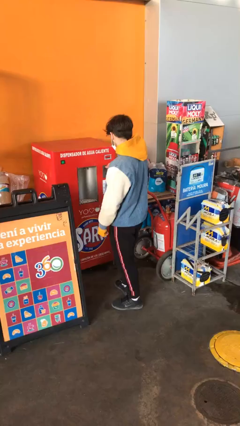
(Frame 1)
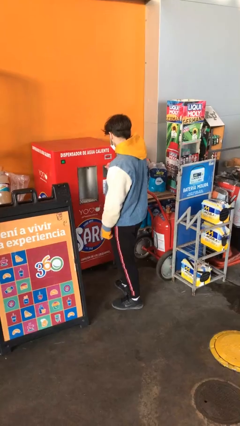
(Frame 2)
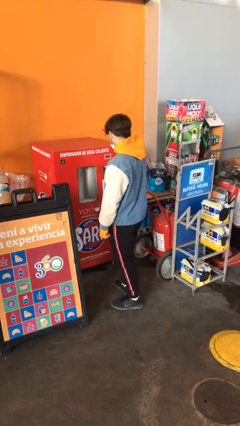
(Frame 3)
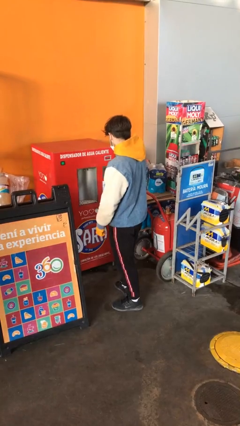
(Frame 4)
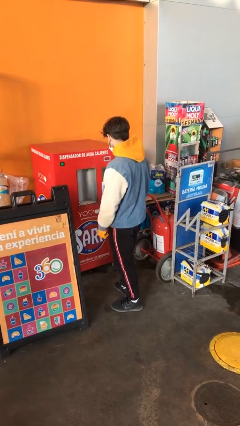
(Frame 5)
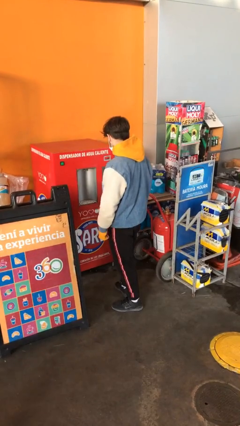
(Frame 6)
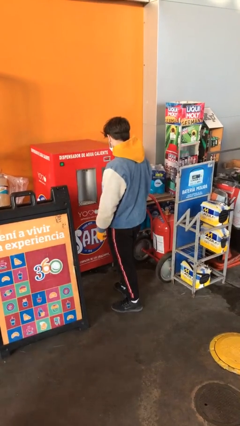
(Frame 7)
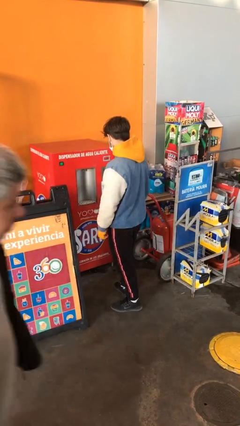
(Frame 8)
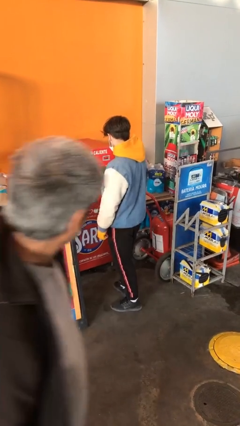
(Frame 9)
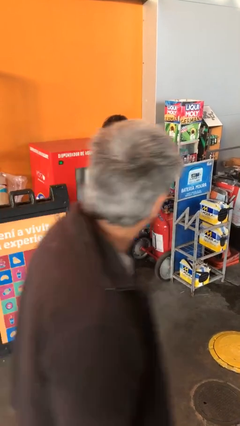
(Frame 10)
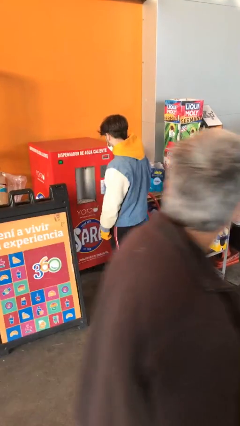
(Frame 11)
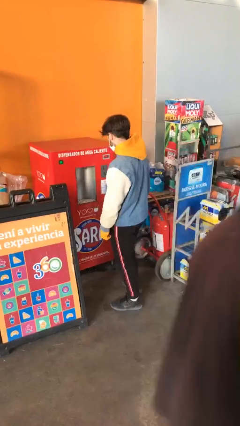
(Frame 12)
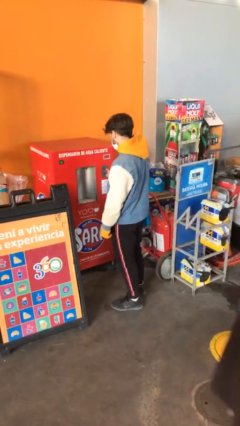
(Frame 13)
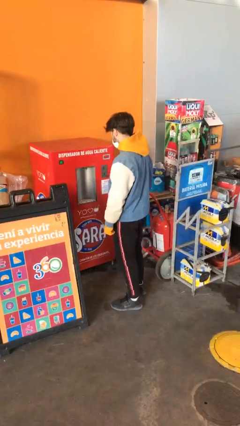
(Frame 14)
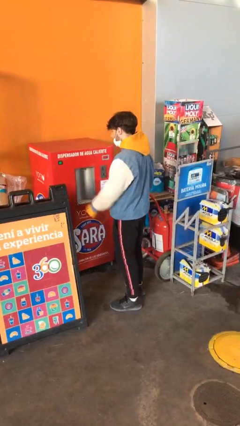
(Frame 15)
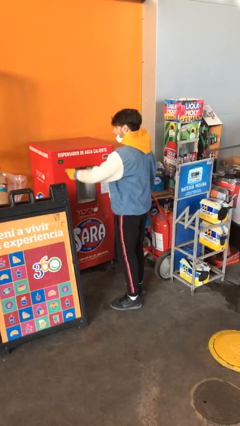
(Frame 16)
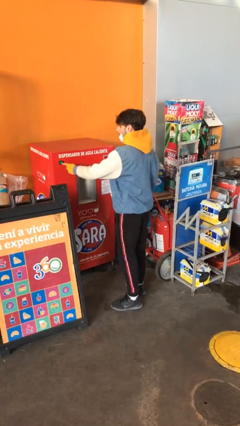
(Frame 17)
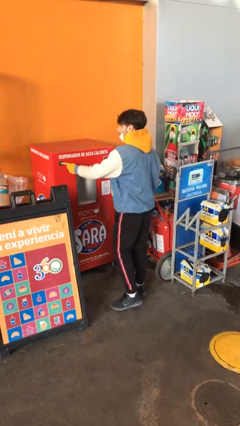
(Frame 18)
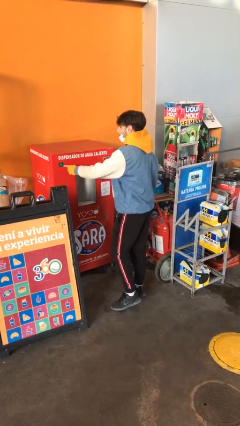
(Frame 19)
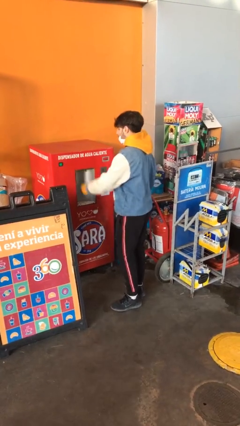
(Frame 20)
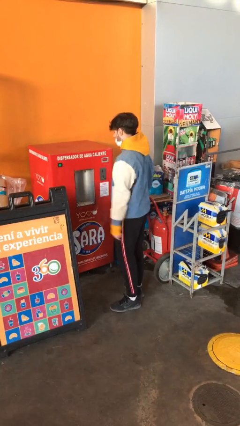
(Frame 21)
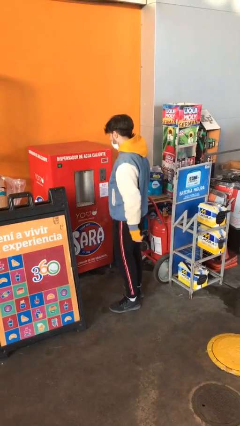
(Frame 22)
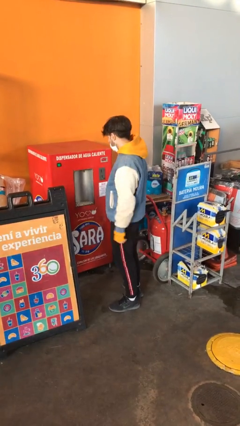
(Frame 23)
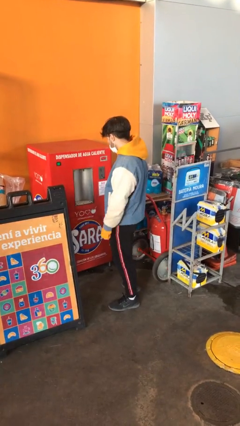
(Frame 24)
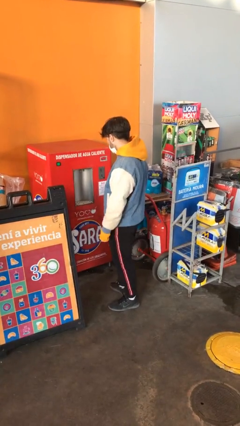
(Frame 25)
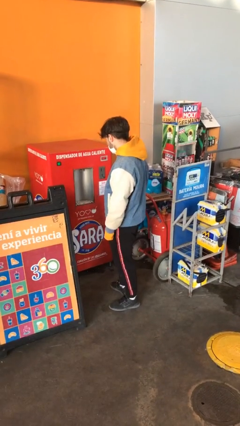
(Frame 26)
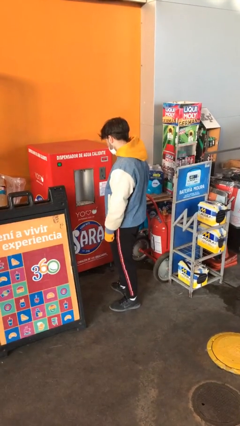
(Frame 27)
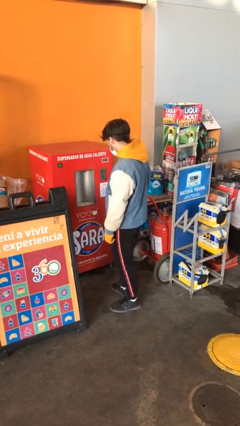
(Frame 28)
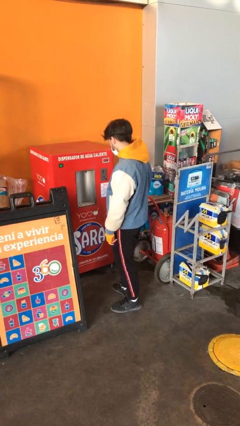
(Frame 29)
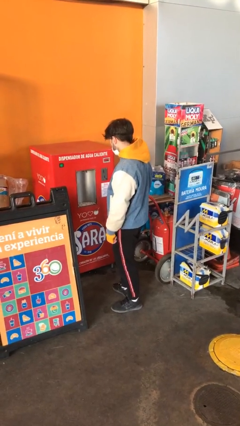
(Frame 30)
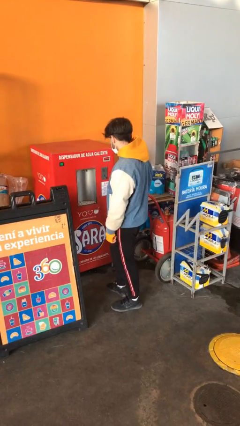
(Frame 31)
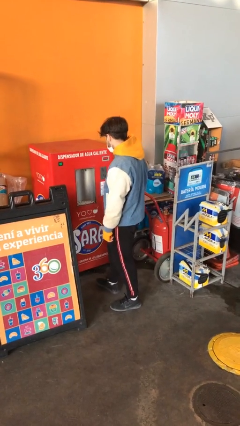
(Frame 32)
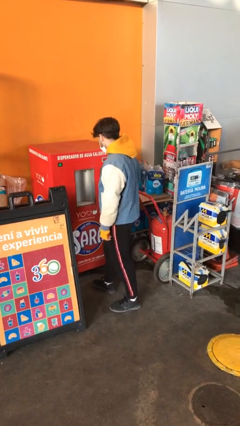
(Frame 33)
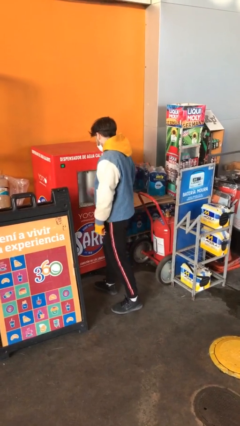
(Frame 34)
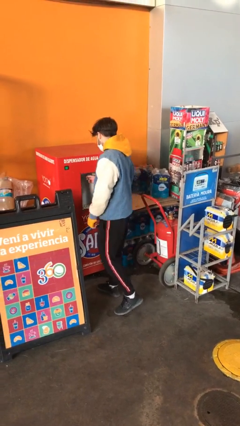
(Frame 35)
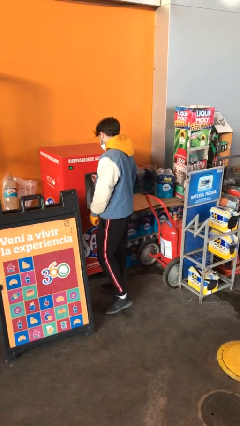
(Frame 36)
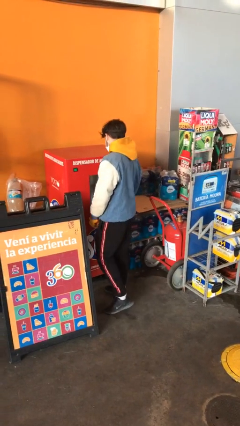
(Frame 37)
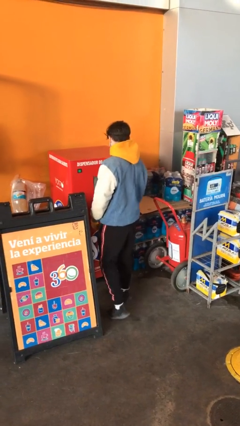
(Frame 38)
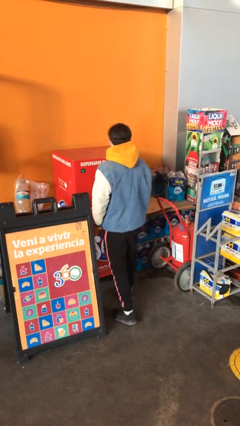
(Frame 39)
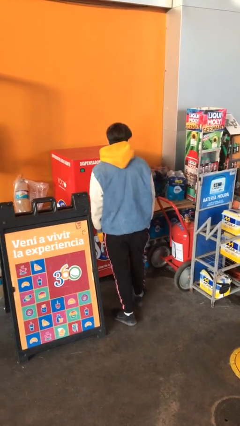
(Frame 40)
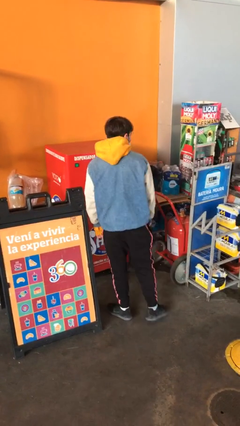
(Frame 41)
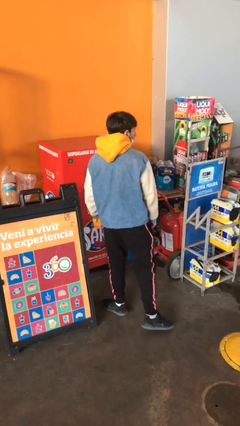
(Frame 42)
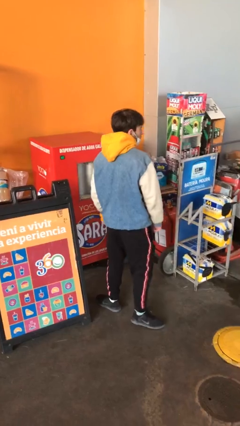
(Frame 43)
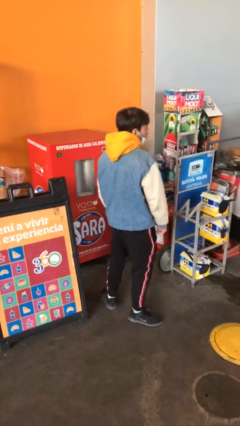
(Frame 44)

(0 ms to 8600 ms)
person purchases from machine

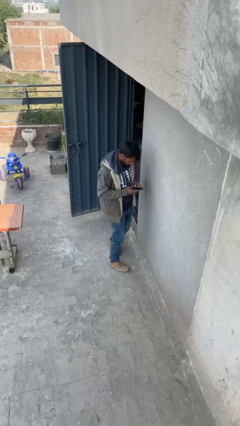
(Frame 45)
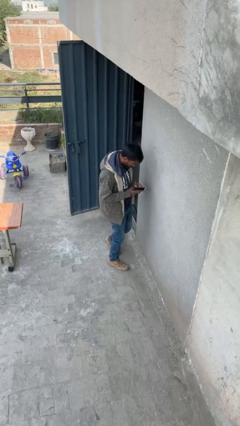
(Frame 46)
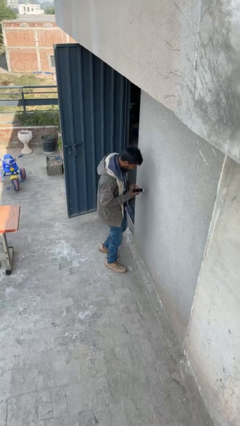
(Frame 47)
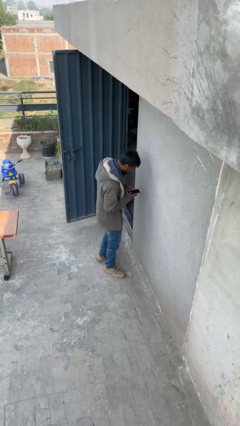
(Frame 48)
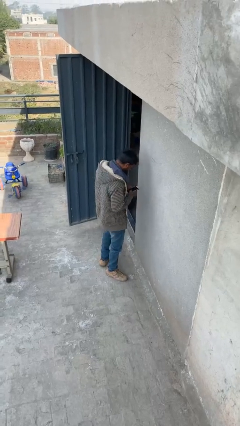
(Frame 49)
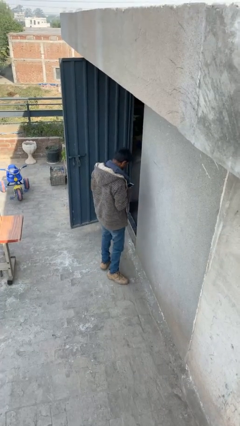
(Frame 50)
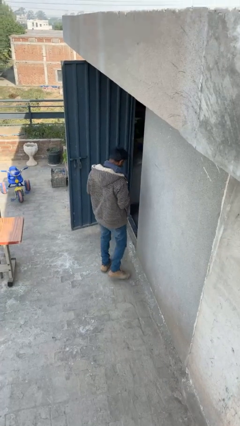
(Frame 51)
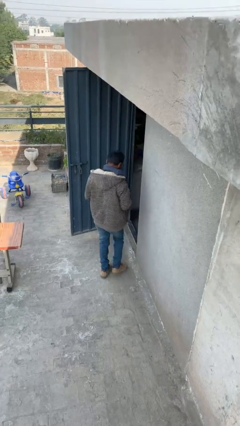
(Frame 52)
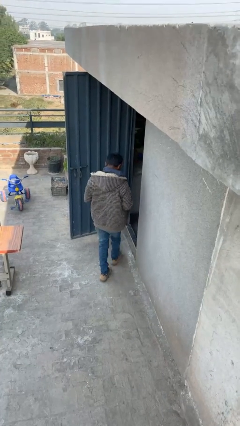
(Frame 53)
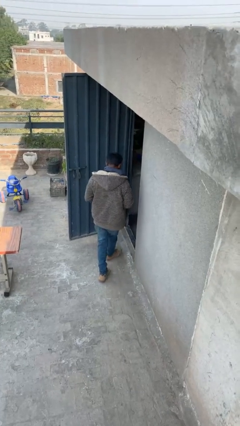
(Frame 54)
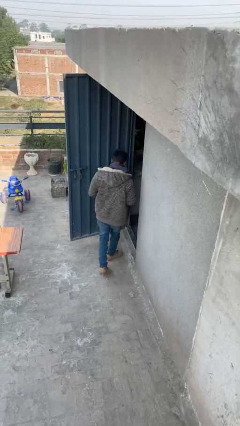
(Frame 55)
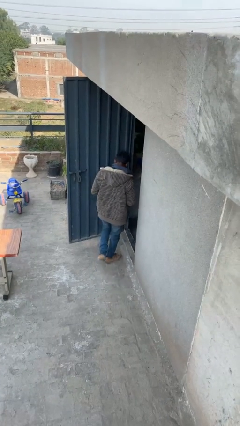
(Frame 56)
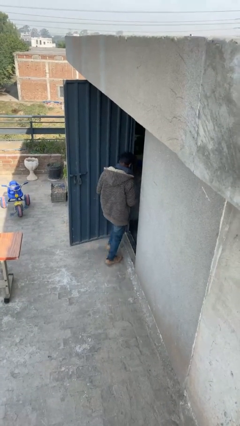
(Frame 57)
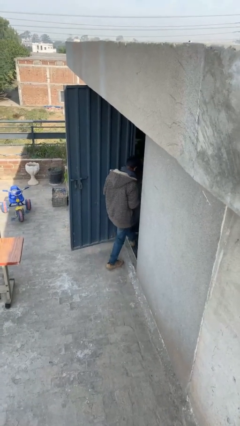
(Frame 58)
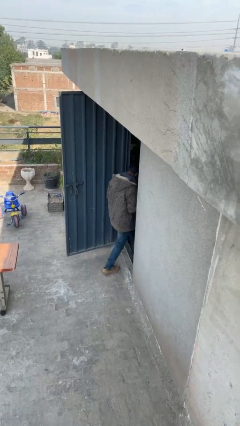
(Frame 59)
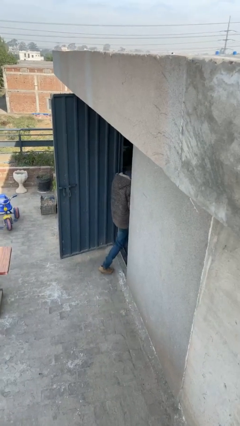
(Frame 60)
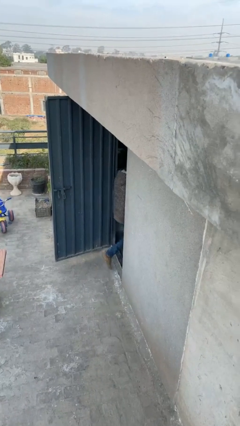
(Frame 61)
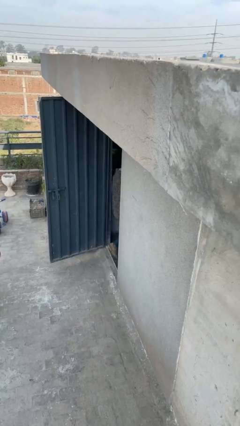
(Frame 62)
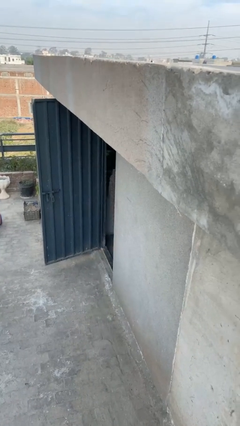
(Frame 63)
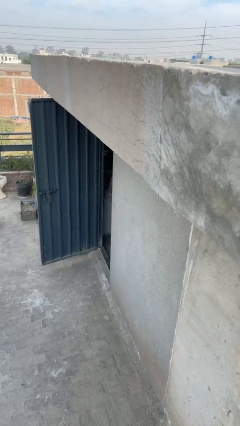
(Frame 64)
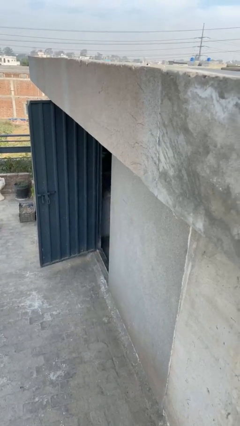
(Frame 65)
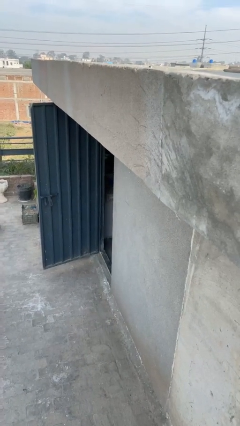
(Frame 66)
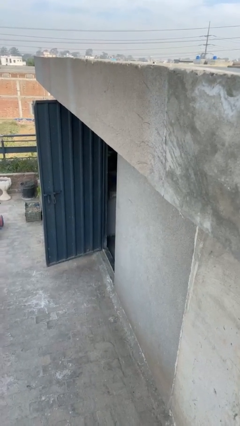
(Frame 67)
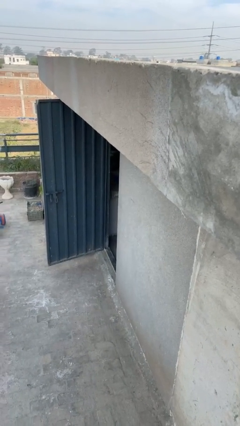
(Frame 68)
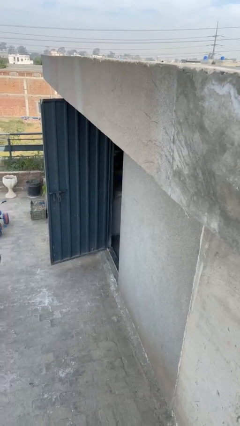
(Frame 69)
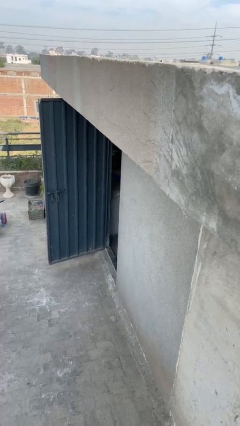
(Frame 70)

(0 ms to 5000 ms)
person exits scene through structure

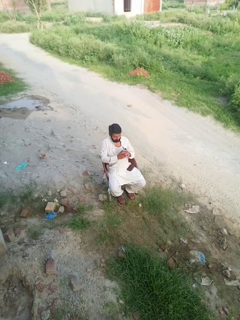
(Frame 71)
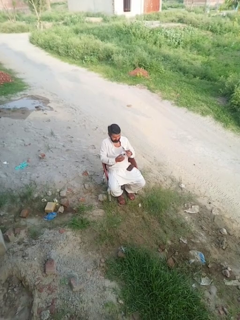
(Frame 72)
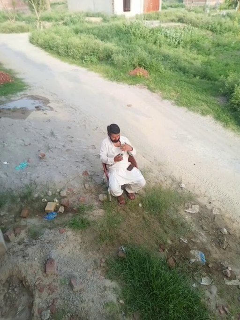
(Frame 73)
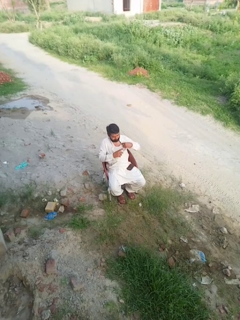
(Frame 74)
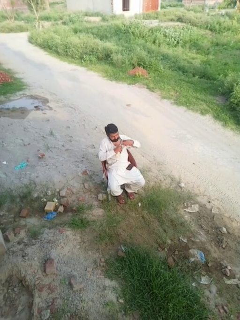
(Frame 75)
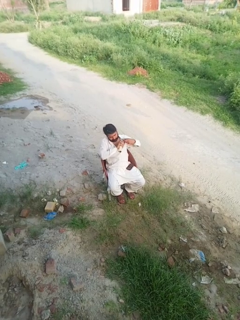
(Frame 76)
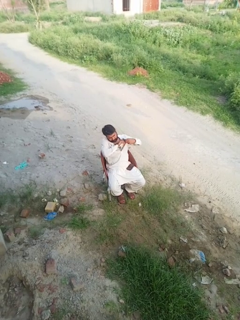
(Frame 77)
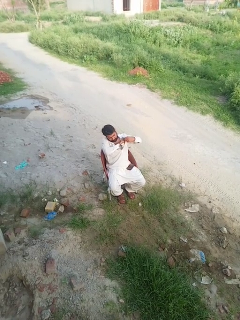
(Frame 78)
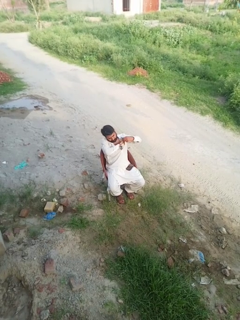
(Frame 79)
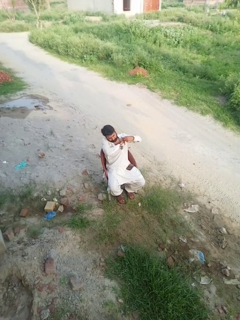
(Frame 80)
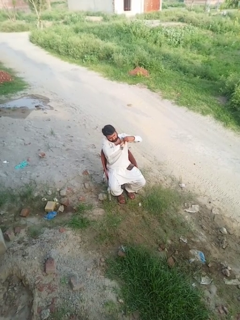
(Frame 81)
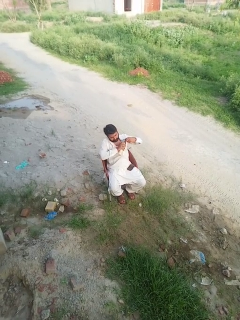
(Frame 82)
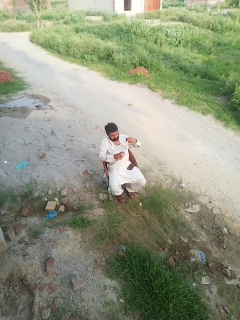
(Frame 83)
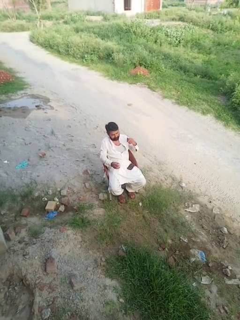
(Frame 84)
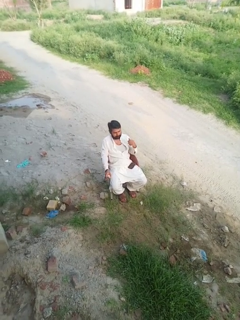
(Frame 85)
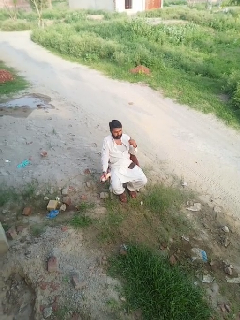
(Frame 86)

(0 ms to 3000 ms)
person applies deodorant

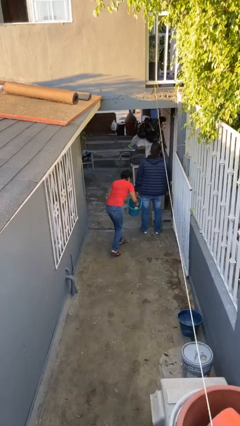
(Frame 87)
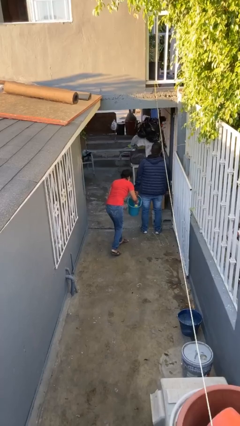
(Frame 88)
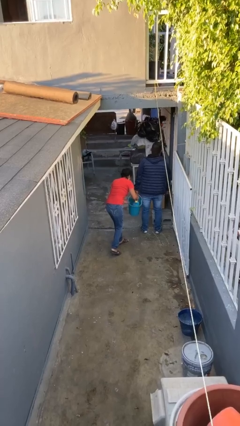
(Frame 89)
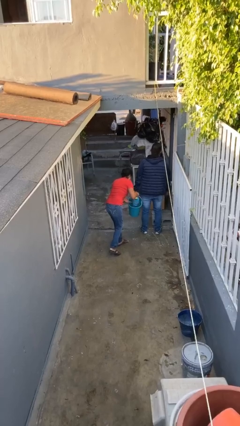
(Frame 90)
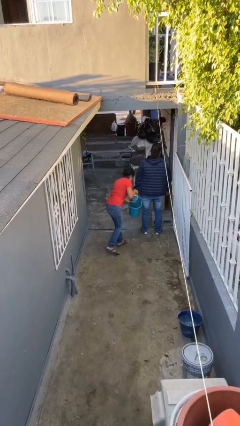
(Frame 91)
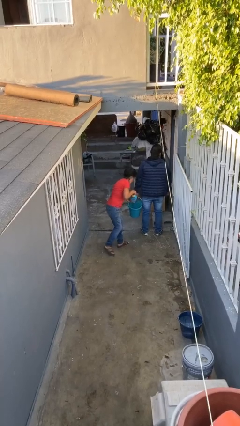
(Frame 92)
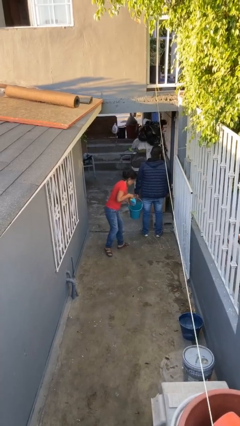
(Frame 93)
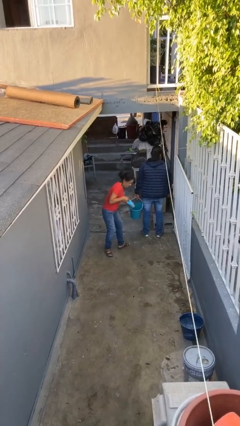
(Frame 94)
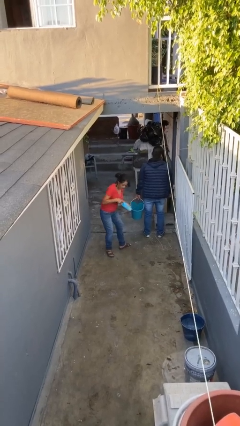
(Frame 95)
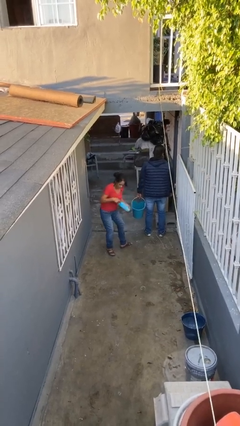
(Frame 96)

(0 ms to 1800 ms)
person steals object from person
